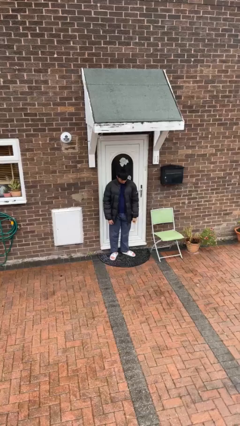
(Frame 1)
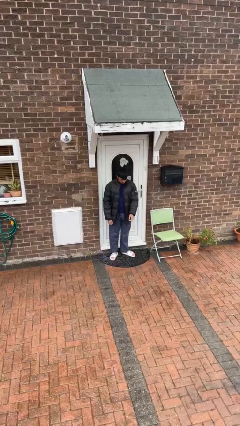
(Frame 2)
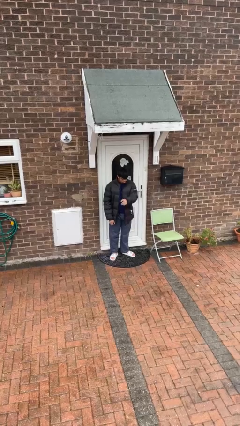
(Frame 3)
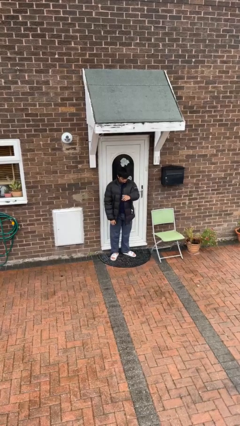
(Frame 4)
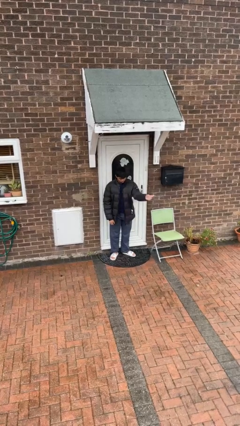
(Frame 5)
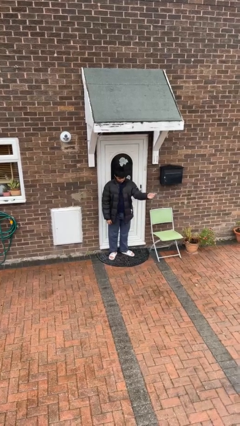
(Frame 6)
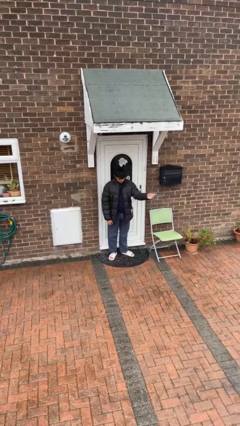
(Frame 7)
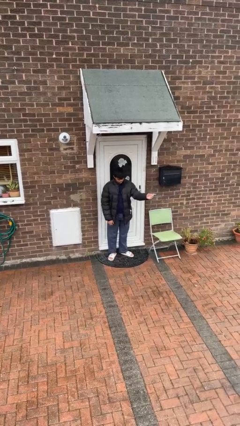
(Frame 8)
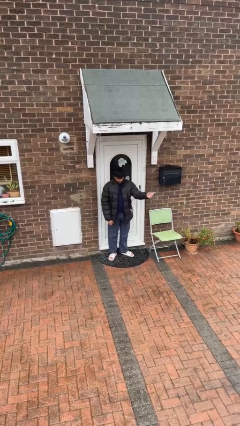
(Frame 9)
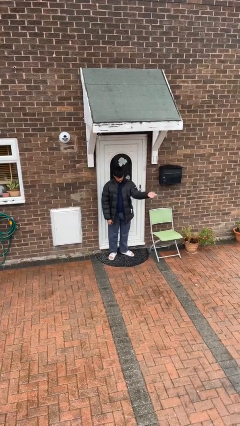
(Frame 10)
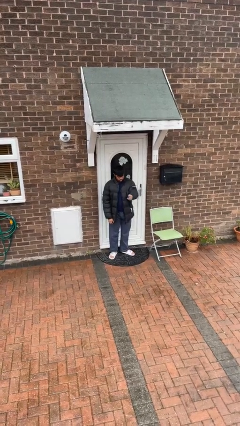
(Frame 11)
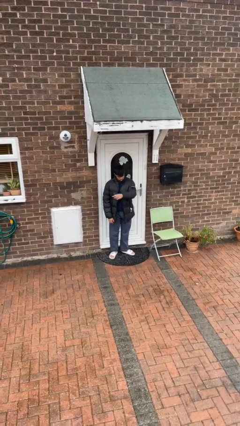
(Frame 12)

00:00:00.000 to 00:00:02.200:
person gestures swipe left

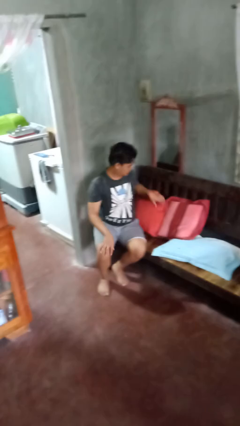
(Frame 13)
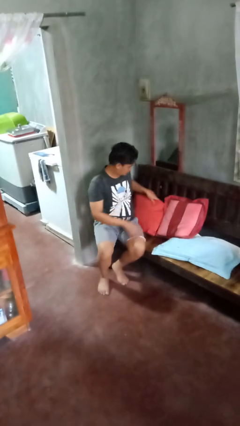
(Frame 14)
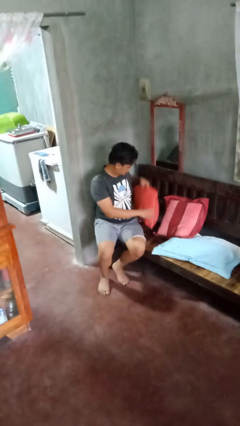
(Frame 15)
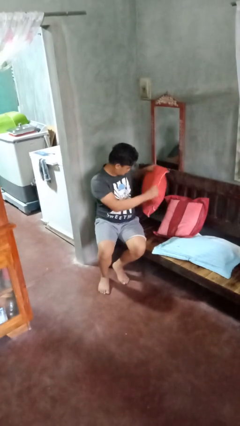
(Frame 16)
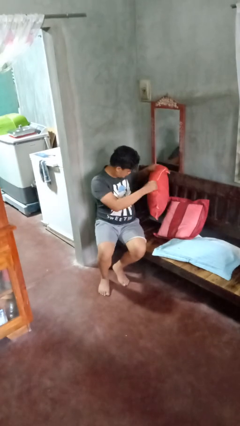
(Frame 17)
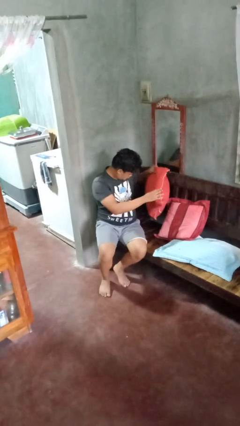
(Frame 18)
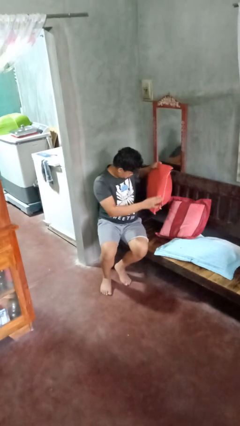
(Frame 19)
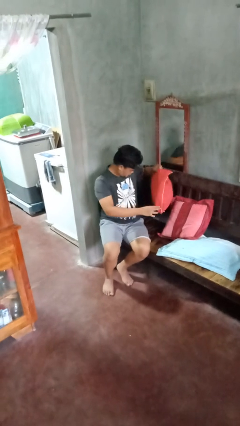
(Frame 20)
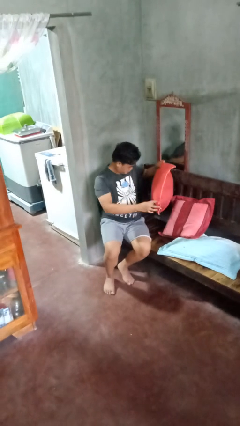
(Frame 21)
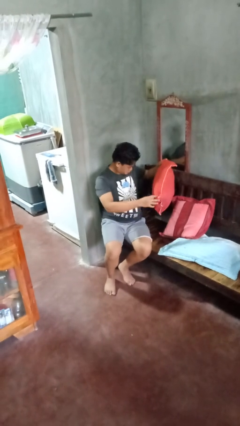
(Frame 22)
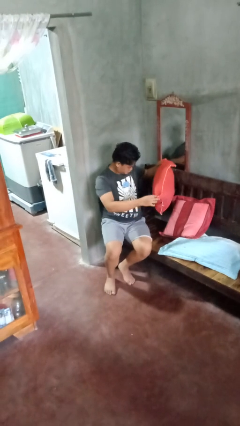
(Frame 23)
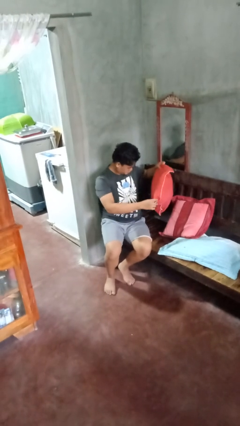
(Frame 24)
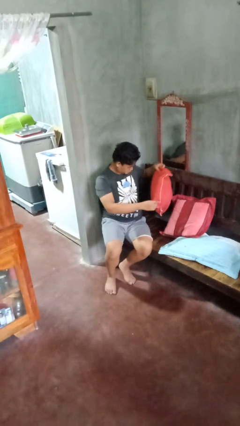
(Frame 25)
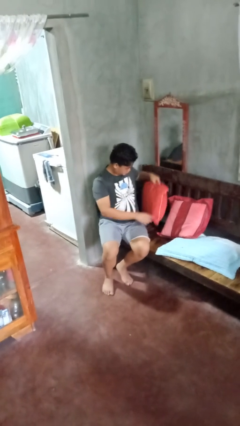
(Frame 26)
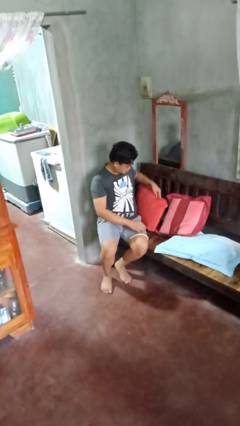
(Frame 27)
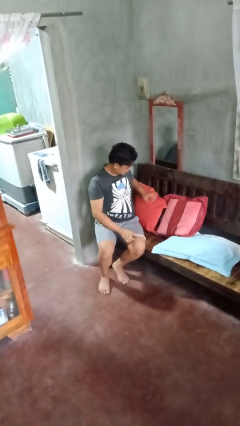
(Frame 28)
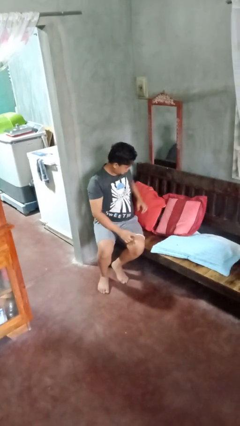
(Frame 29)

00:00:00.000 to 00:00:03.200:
person searches in couch

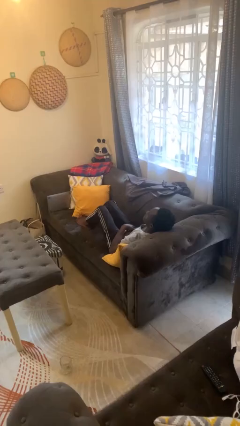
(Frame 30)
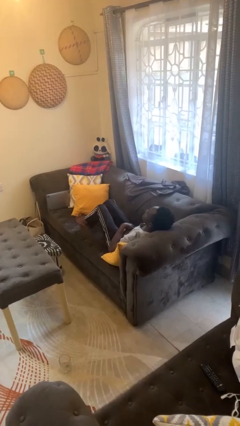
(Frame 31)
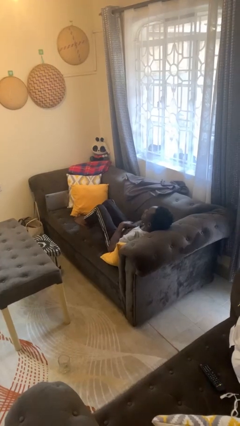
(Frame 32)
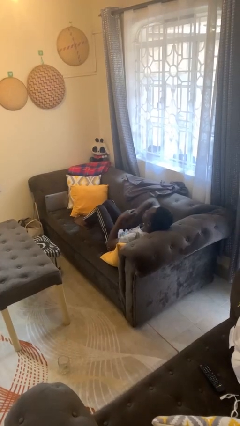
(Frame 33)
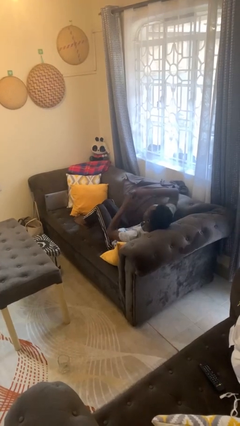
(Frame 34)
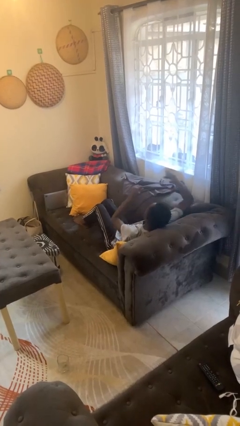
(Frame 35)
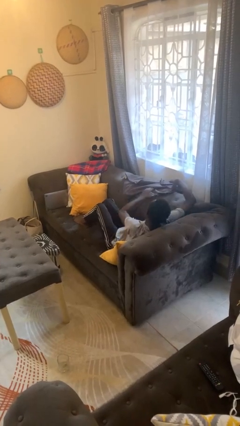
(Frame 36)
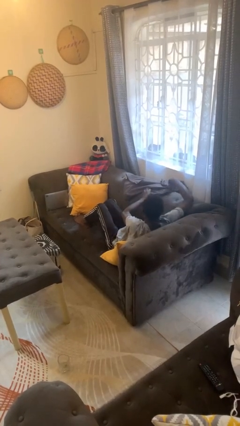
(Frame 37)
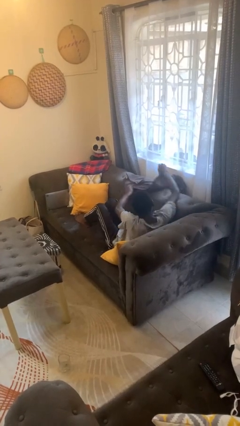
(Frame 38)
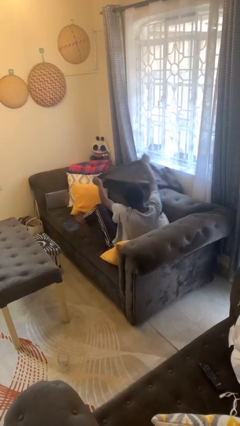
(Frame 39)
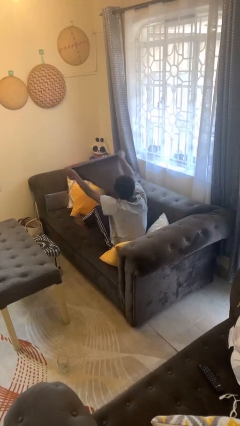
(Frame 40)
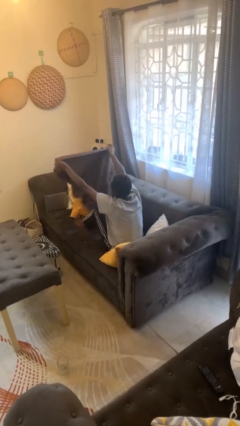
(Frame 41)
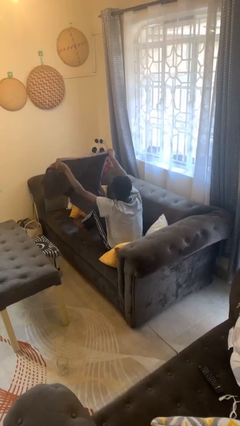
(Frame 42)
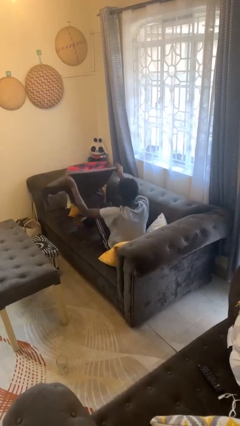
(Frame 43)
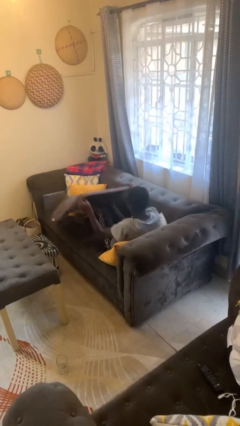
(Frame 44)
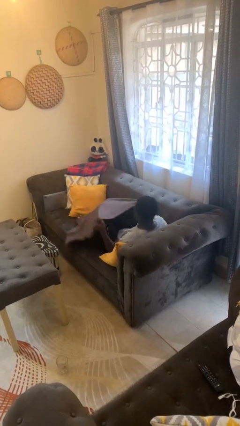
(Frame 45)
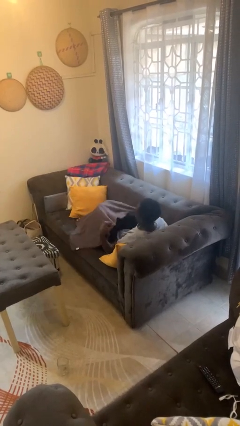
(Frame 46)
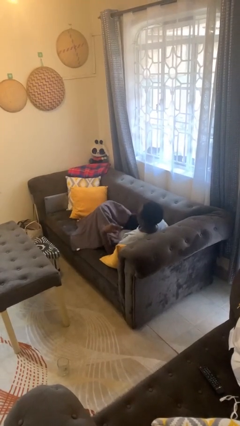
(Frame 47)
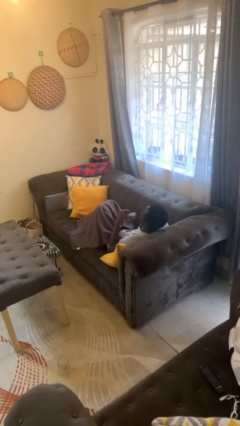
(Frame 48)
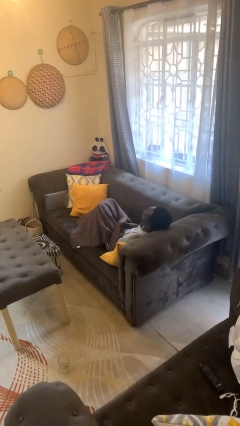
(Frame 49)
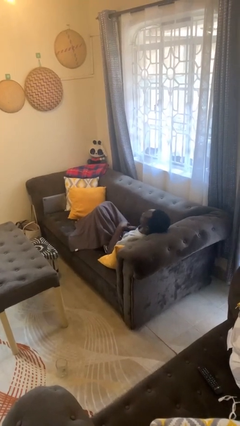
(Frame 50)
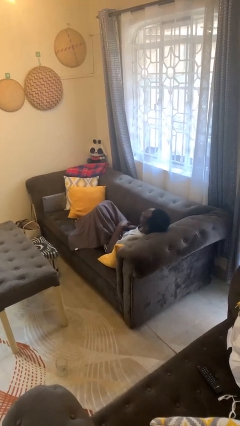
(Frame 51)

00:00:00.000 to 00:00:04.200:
person covers with blanket

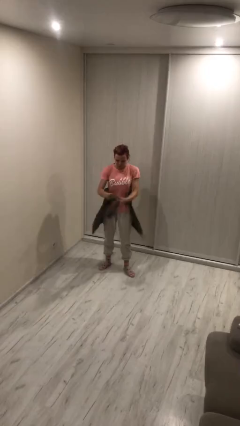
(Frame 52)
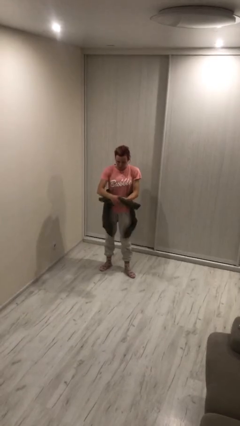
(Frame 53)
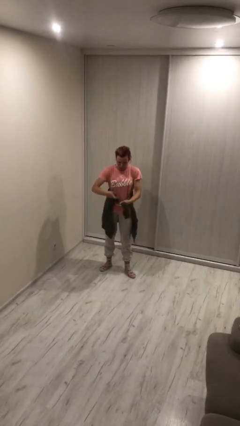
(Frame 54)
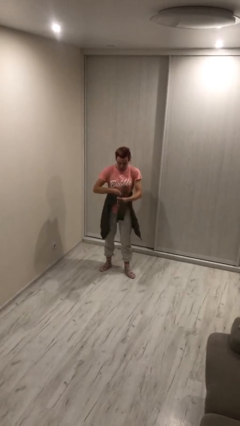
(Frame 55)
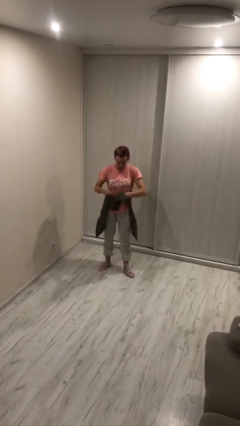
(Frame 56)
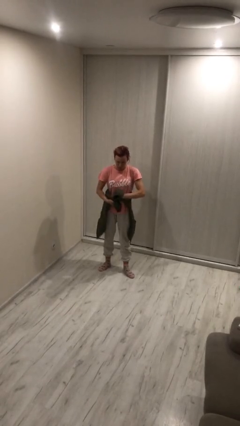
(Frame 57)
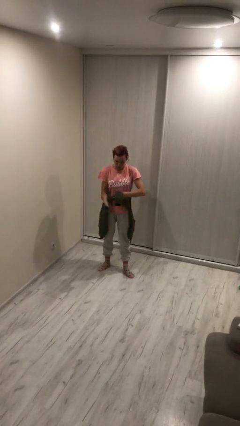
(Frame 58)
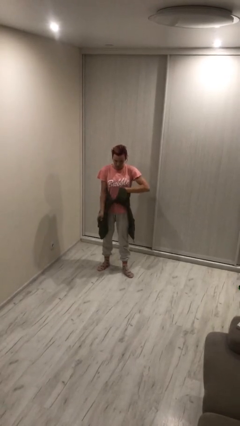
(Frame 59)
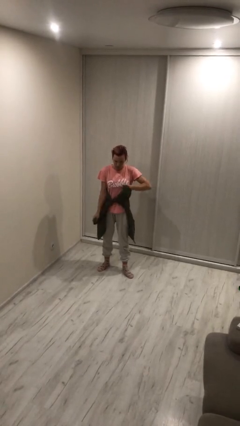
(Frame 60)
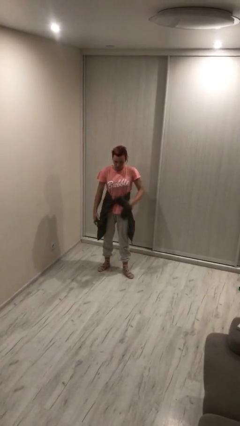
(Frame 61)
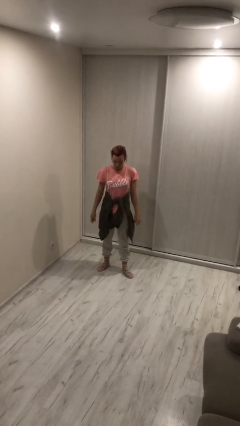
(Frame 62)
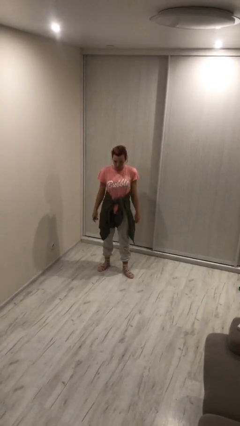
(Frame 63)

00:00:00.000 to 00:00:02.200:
person ties jacket around waist

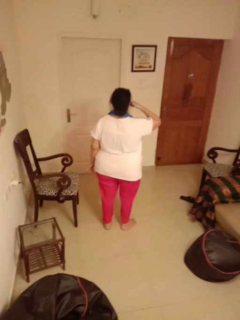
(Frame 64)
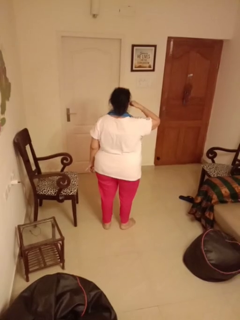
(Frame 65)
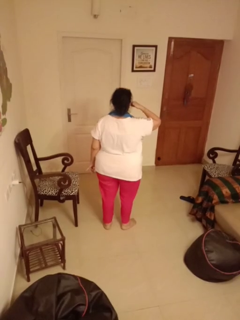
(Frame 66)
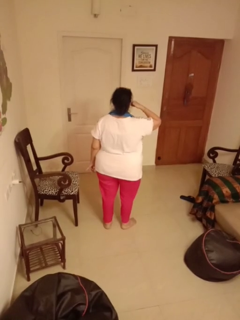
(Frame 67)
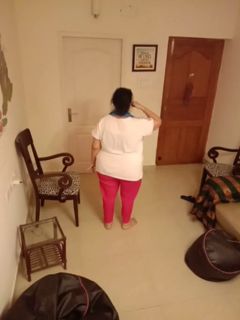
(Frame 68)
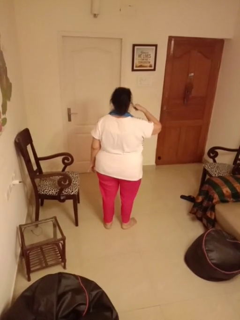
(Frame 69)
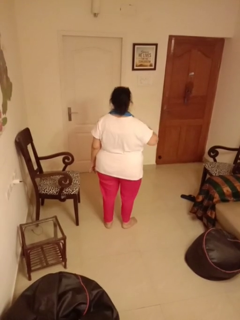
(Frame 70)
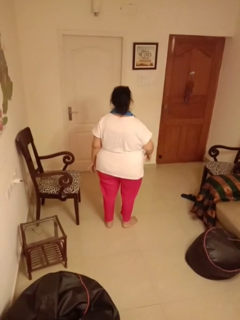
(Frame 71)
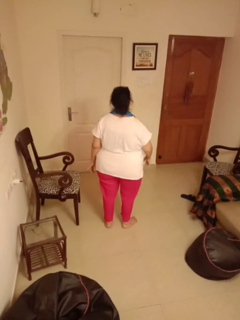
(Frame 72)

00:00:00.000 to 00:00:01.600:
person gestures call me

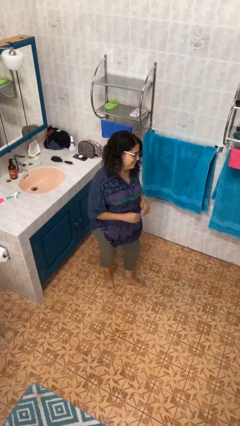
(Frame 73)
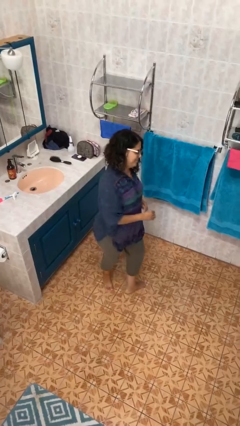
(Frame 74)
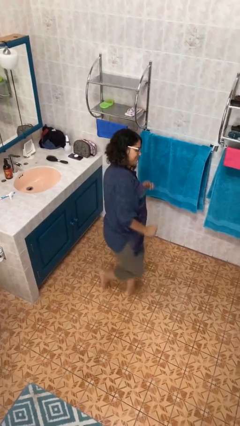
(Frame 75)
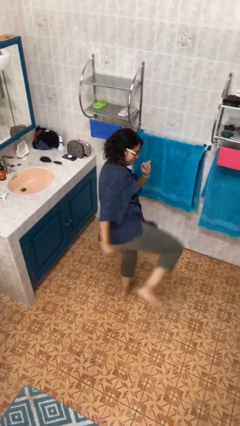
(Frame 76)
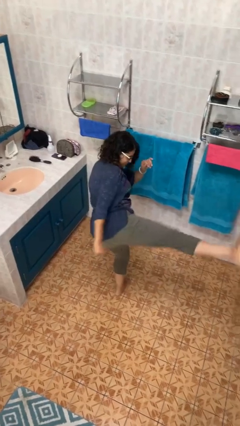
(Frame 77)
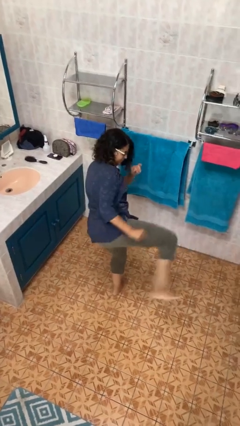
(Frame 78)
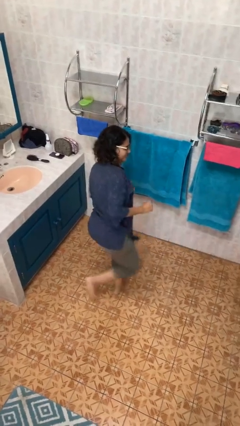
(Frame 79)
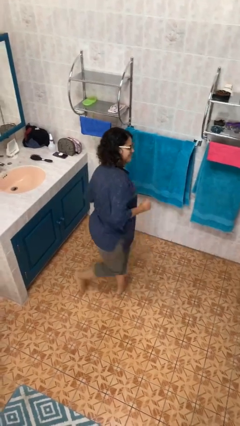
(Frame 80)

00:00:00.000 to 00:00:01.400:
person karate kicks

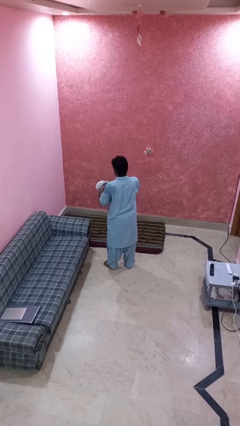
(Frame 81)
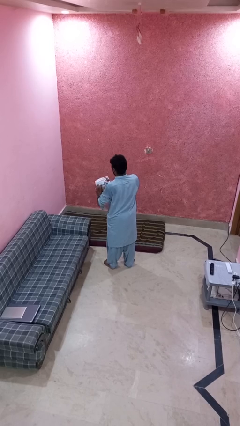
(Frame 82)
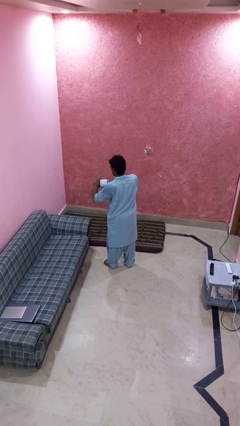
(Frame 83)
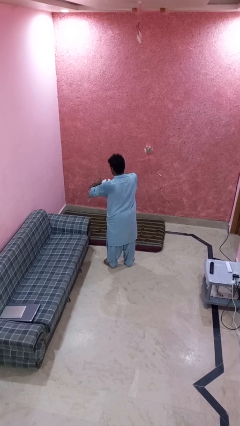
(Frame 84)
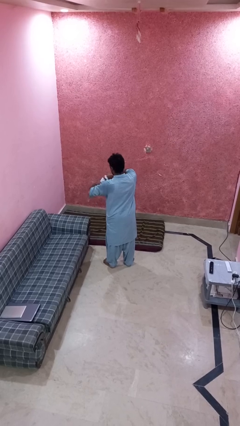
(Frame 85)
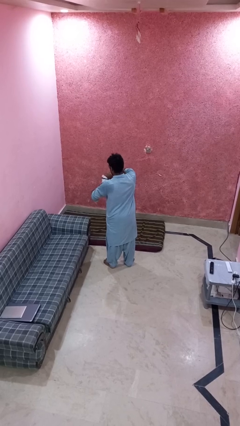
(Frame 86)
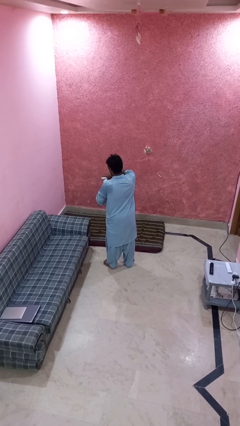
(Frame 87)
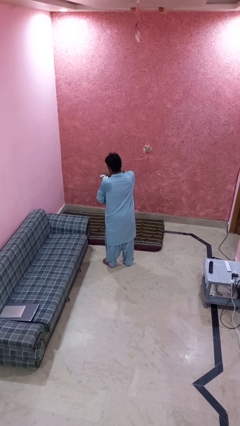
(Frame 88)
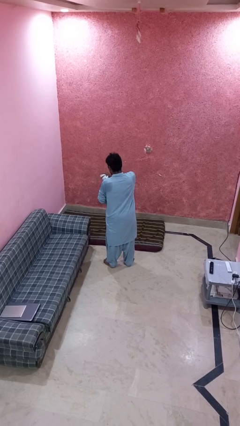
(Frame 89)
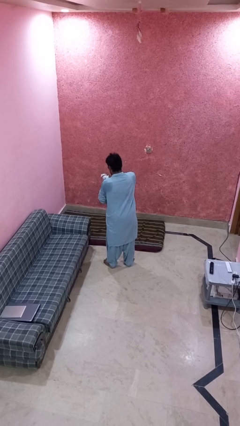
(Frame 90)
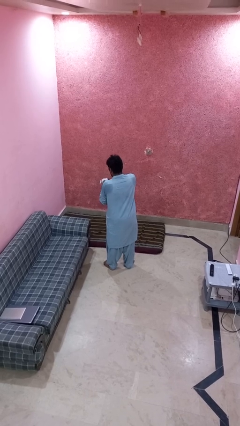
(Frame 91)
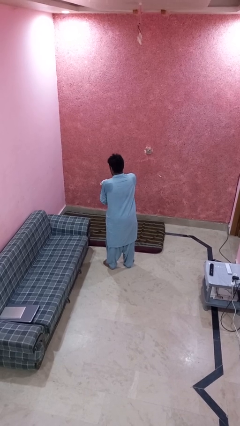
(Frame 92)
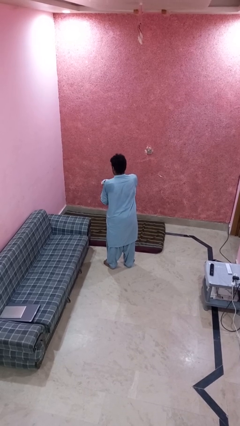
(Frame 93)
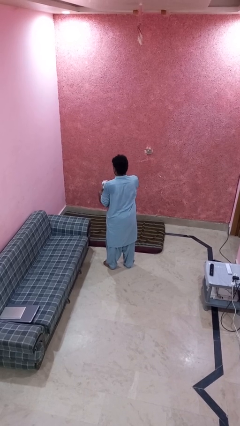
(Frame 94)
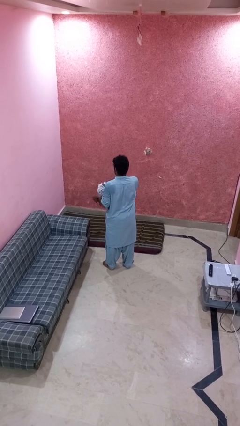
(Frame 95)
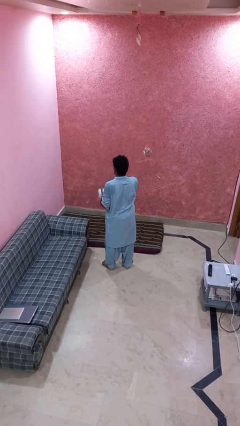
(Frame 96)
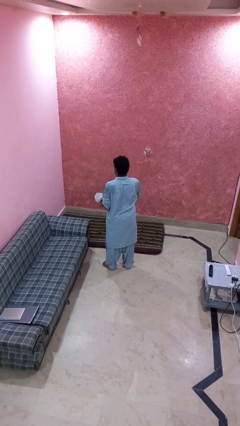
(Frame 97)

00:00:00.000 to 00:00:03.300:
person squeezes object
